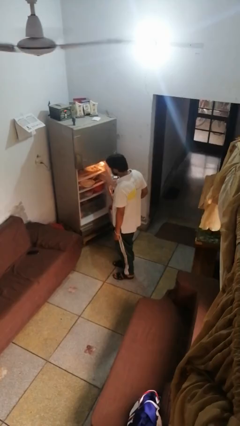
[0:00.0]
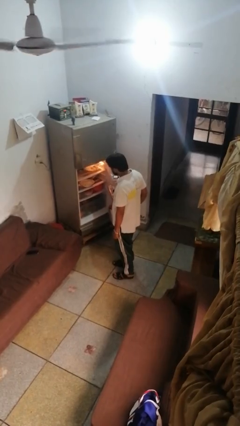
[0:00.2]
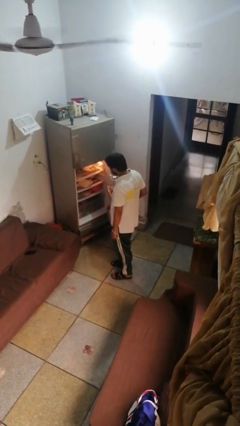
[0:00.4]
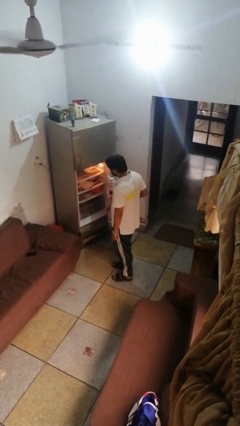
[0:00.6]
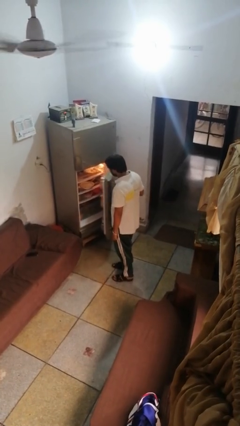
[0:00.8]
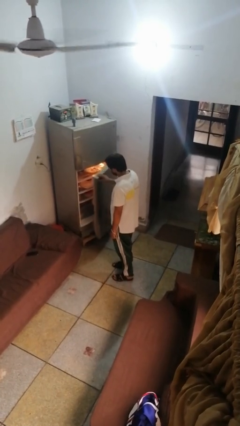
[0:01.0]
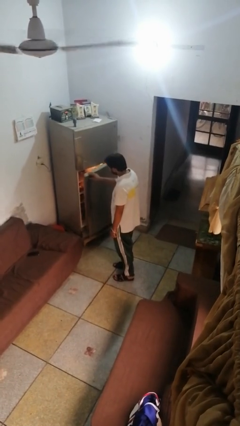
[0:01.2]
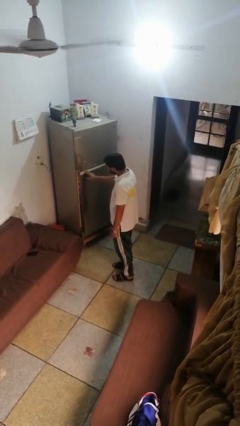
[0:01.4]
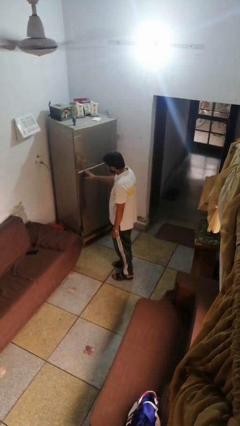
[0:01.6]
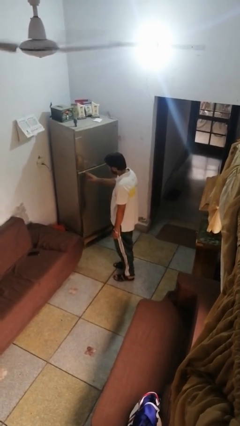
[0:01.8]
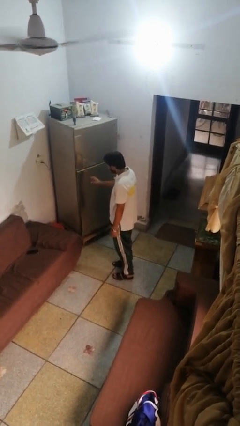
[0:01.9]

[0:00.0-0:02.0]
person closes refrigerator

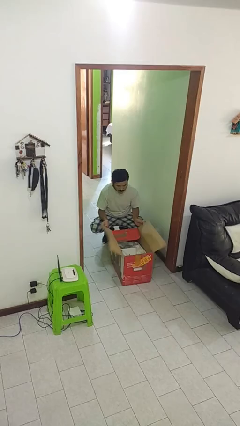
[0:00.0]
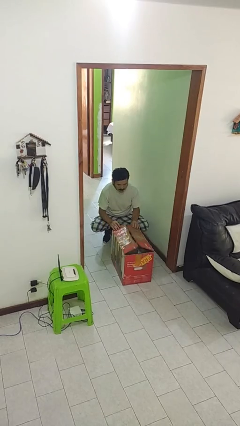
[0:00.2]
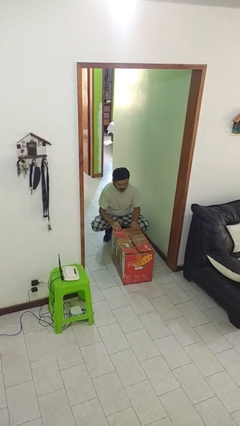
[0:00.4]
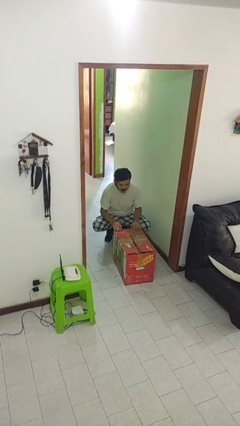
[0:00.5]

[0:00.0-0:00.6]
person closes box

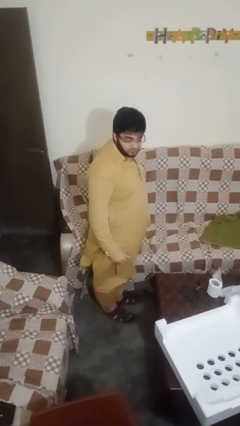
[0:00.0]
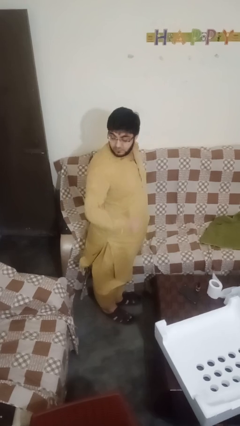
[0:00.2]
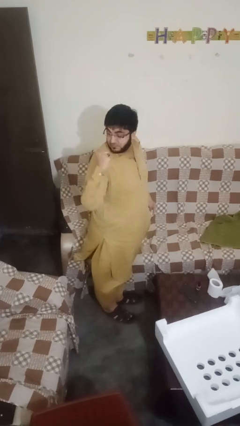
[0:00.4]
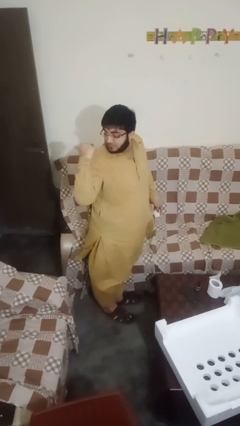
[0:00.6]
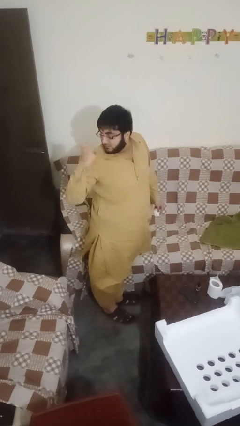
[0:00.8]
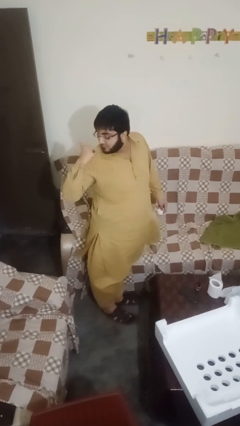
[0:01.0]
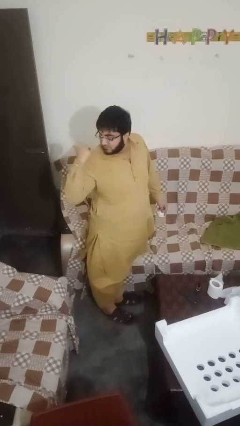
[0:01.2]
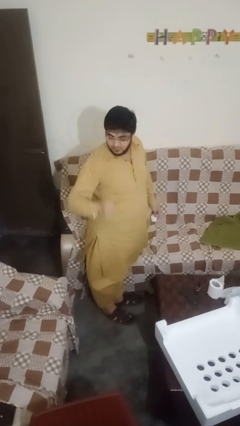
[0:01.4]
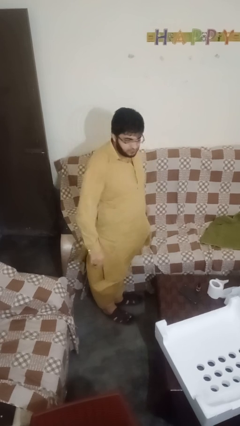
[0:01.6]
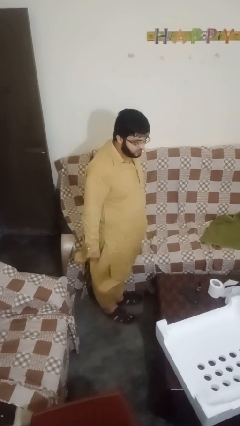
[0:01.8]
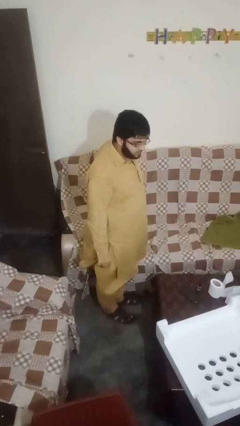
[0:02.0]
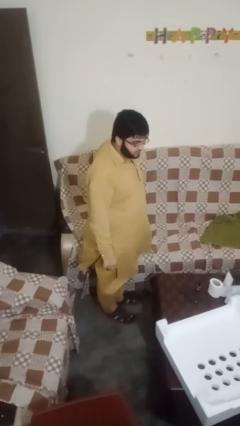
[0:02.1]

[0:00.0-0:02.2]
person gestures behind me

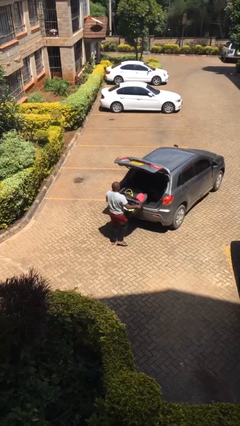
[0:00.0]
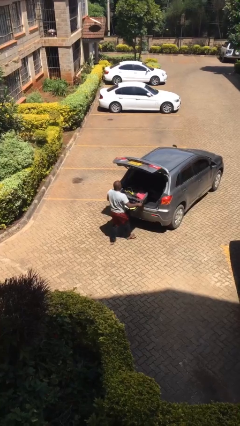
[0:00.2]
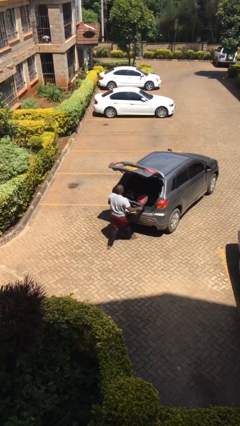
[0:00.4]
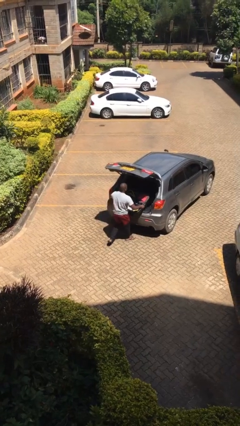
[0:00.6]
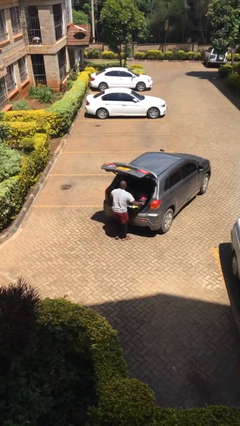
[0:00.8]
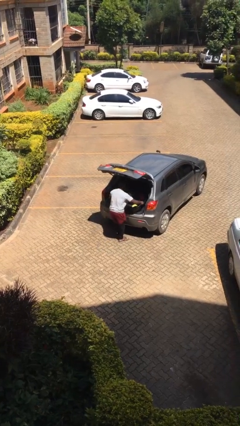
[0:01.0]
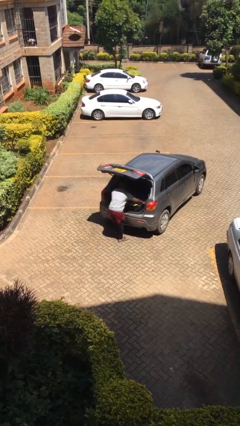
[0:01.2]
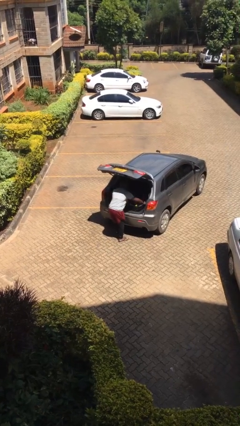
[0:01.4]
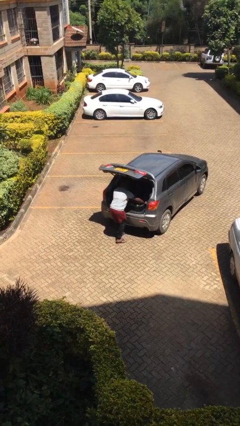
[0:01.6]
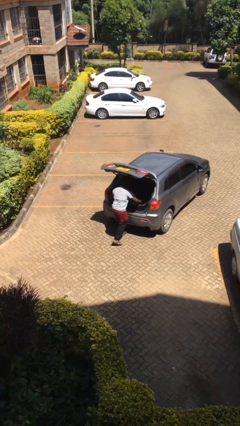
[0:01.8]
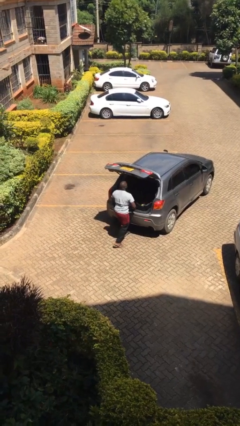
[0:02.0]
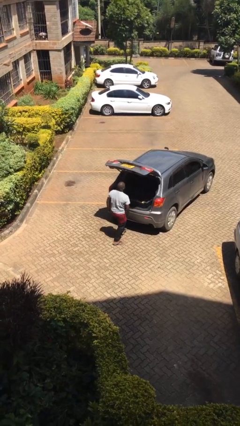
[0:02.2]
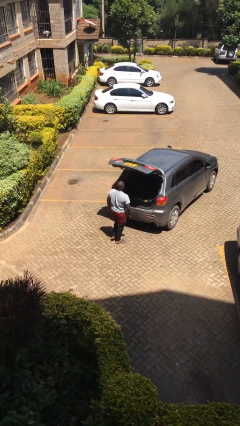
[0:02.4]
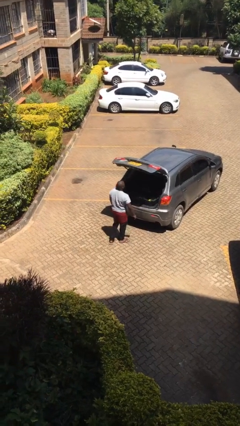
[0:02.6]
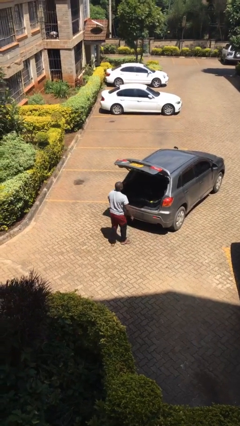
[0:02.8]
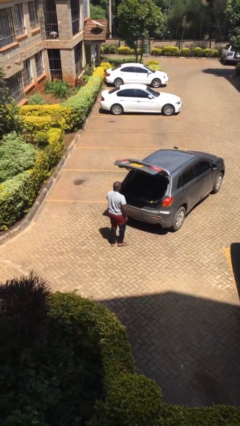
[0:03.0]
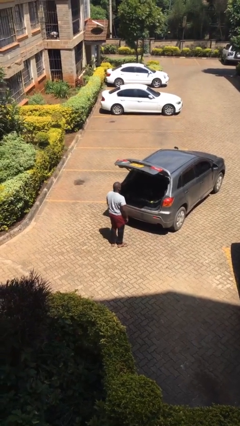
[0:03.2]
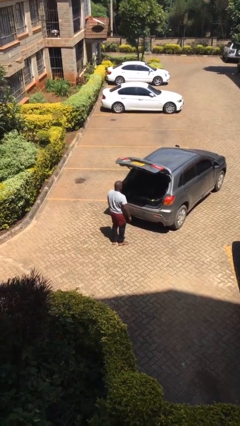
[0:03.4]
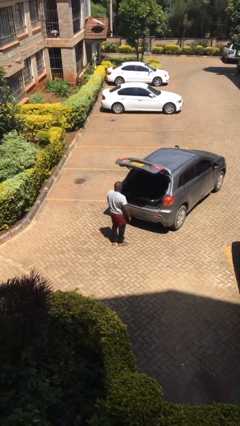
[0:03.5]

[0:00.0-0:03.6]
person loads car

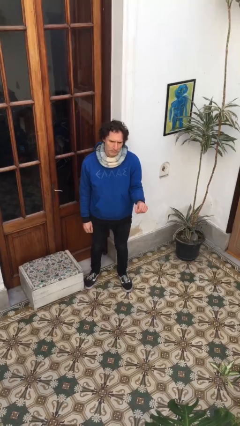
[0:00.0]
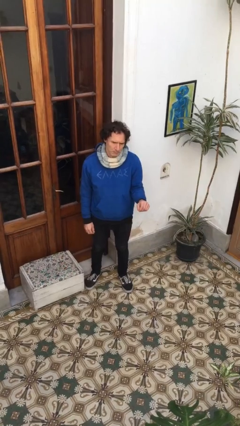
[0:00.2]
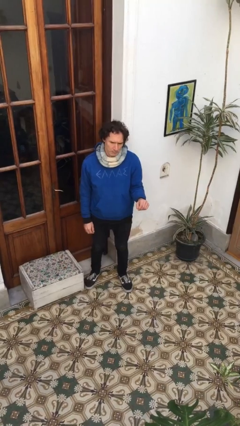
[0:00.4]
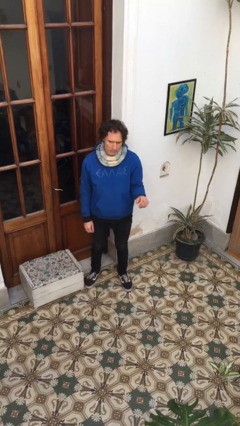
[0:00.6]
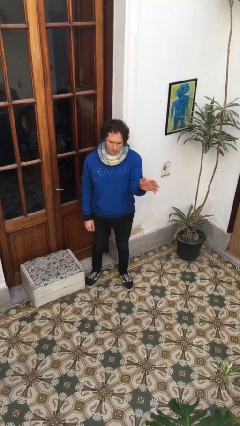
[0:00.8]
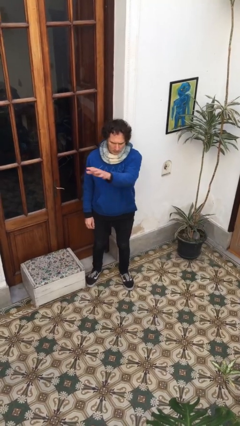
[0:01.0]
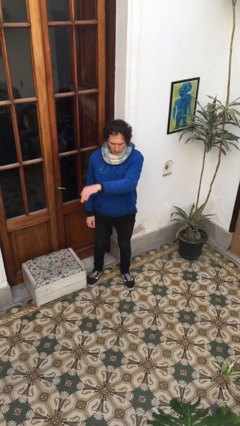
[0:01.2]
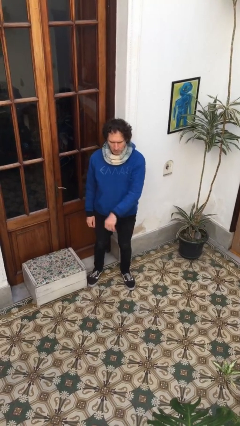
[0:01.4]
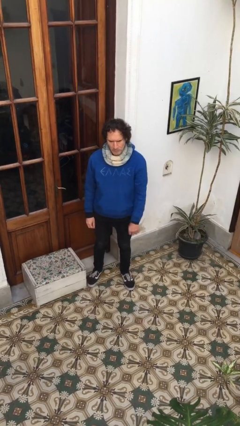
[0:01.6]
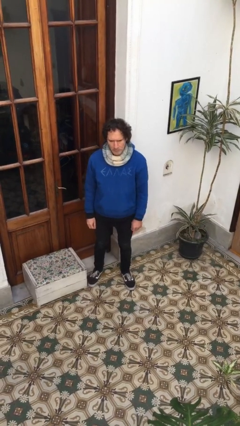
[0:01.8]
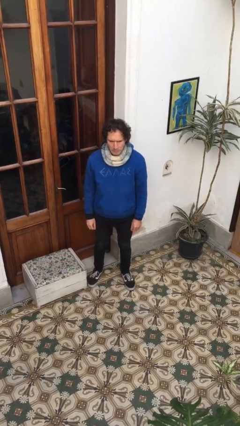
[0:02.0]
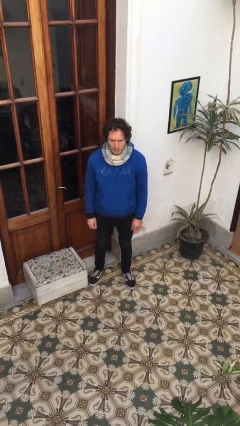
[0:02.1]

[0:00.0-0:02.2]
person gestures swipe right

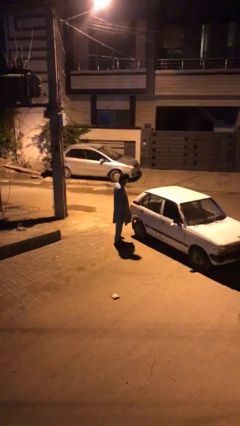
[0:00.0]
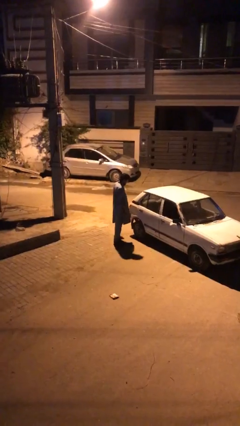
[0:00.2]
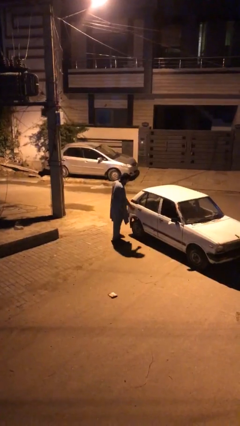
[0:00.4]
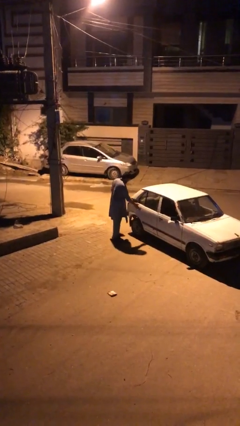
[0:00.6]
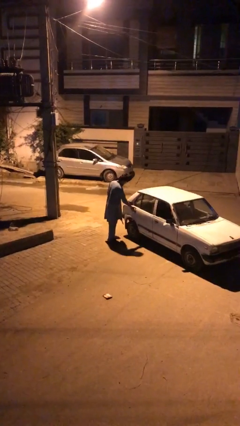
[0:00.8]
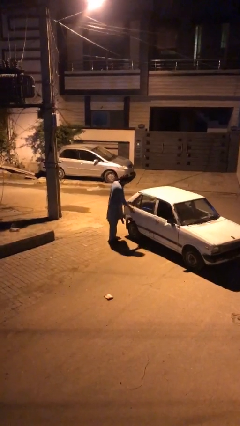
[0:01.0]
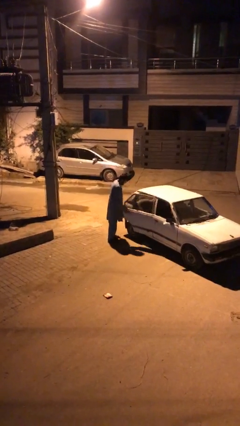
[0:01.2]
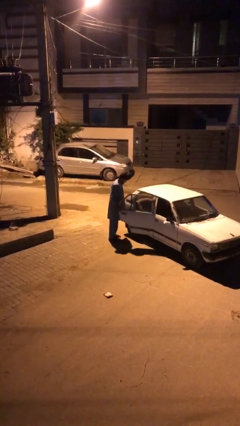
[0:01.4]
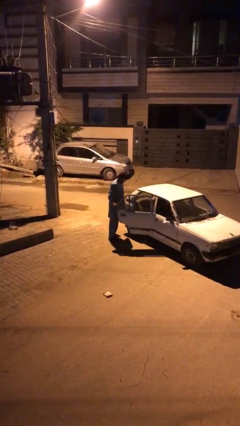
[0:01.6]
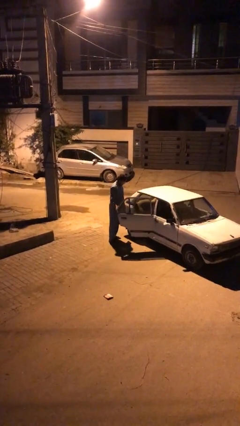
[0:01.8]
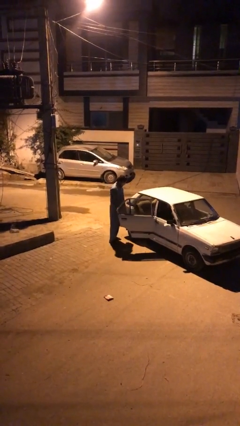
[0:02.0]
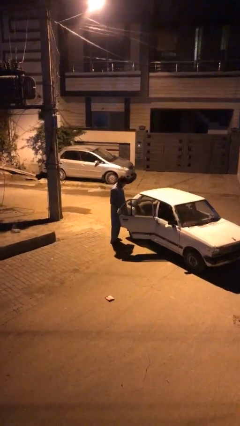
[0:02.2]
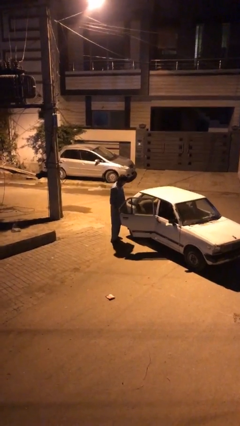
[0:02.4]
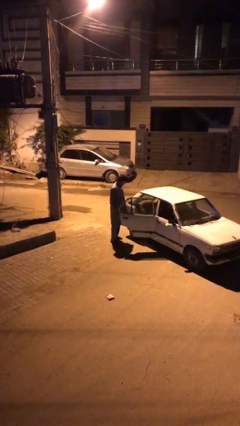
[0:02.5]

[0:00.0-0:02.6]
person opens car door

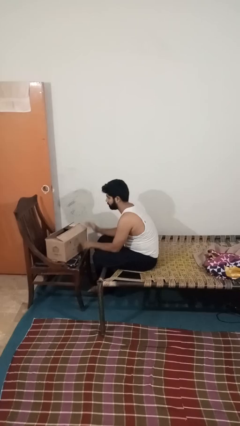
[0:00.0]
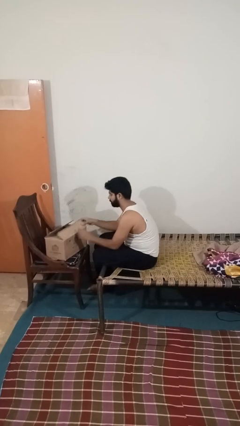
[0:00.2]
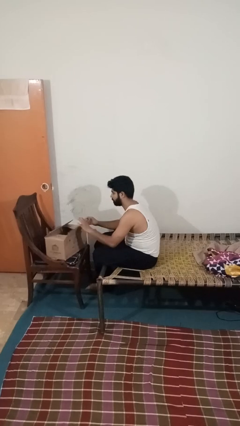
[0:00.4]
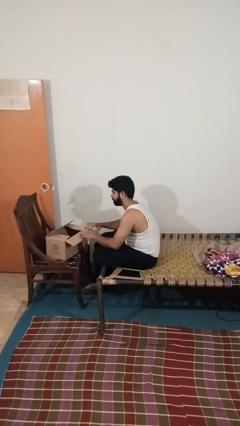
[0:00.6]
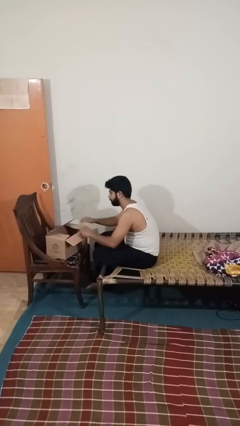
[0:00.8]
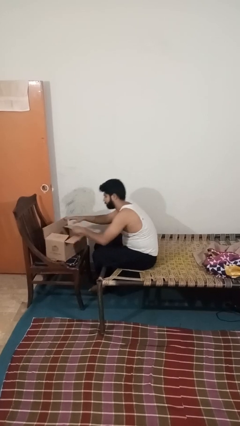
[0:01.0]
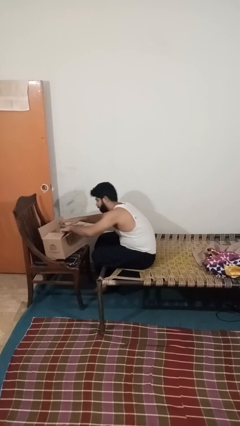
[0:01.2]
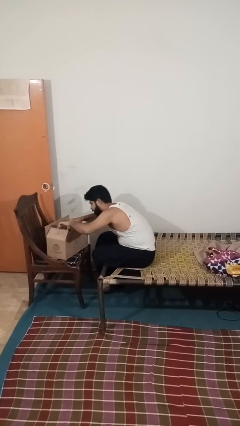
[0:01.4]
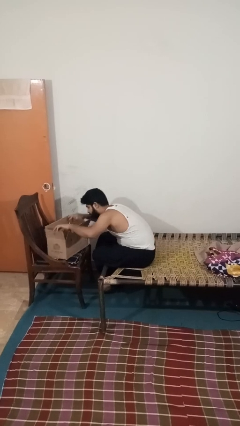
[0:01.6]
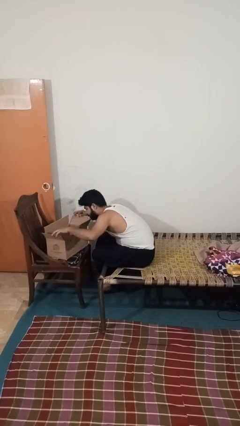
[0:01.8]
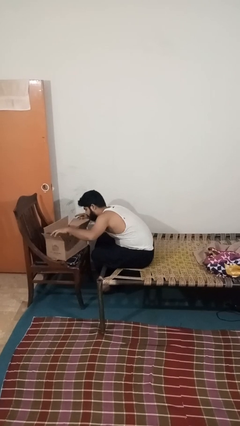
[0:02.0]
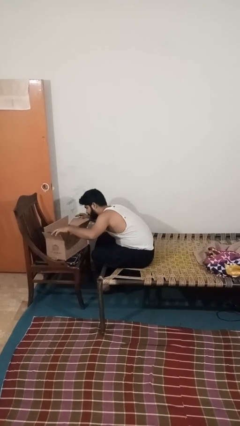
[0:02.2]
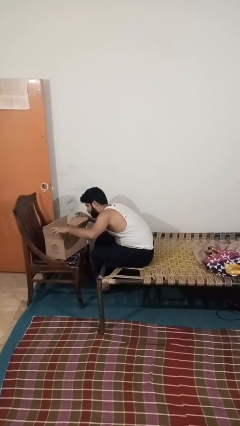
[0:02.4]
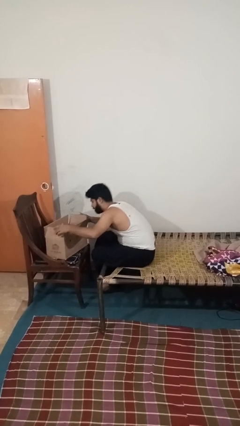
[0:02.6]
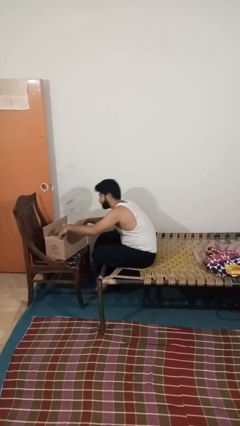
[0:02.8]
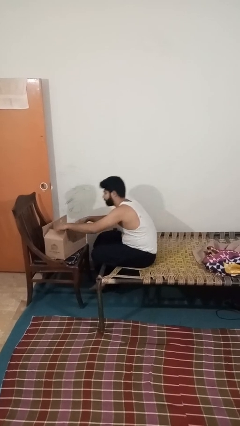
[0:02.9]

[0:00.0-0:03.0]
person opens box

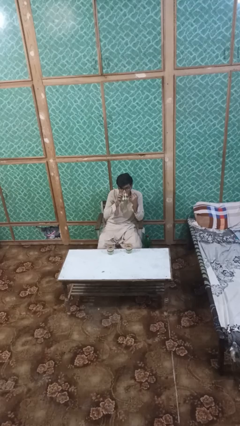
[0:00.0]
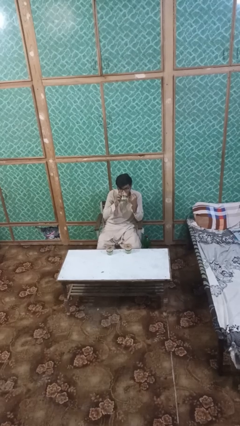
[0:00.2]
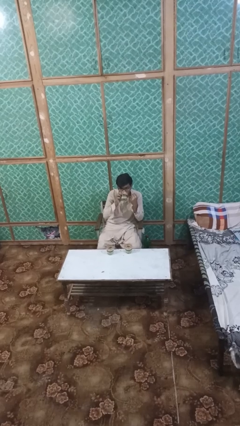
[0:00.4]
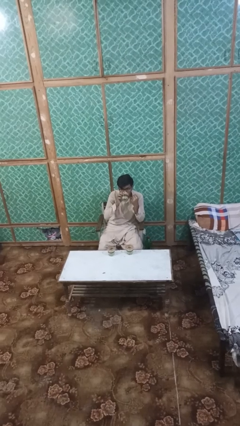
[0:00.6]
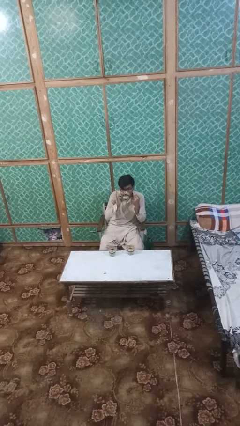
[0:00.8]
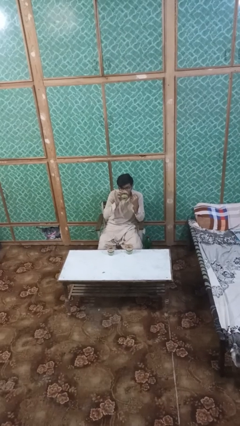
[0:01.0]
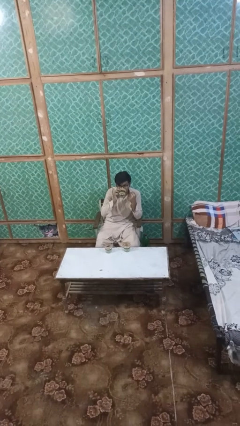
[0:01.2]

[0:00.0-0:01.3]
person drinks from shotglass
